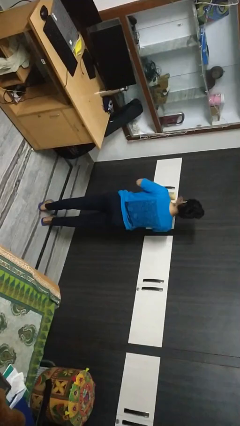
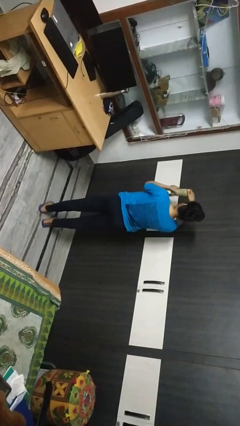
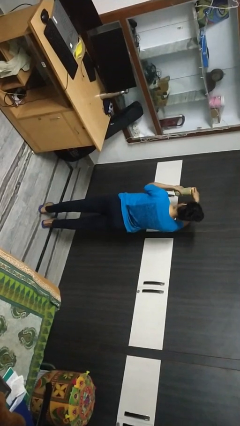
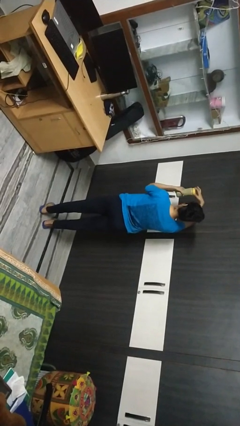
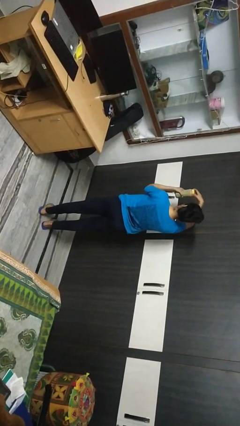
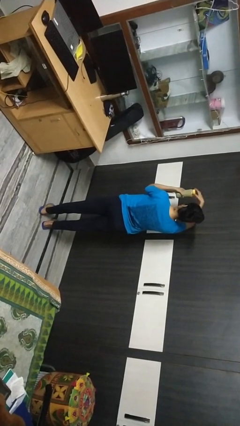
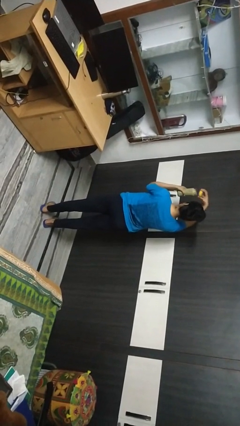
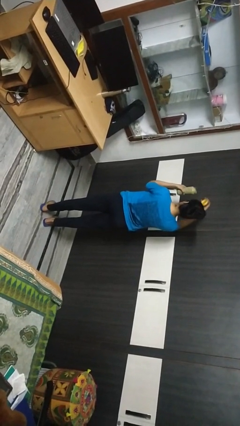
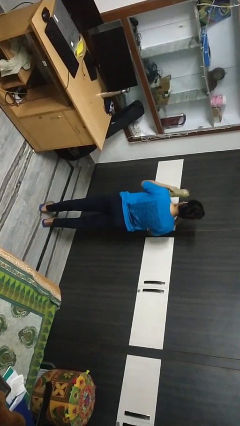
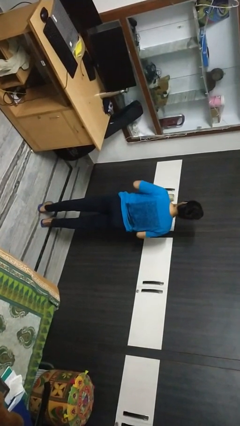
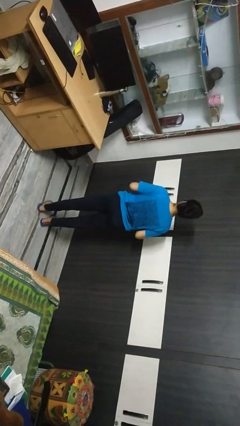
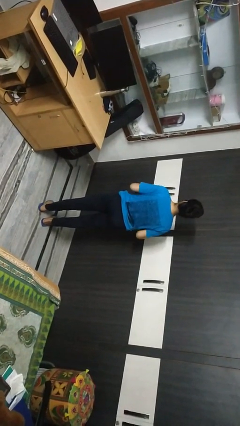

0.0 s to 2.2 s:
person opens jar

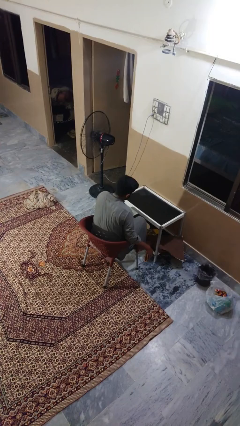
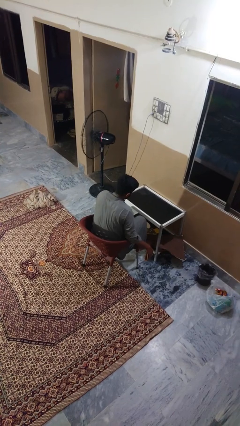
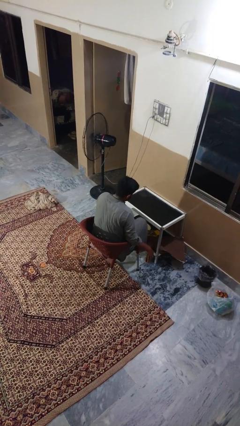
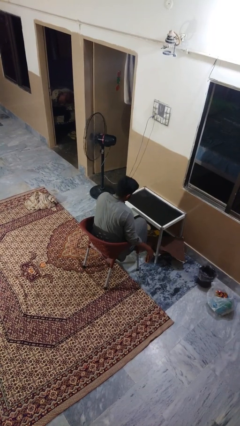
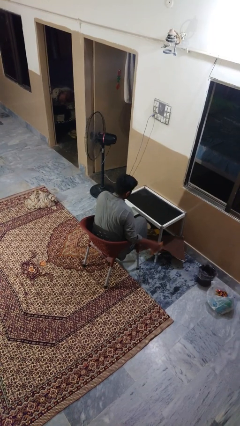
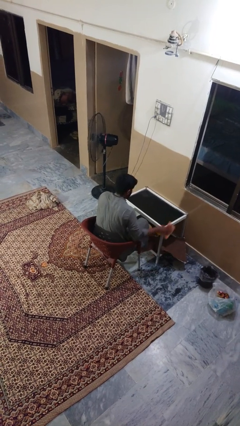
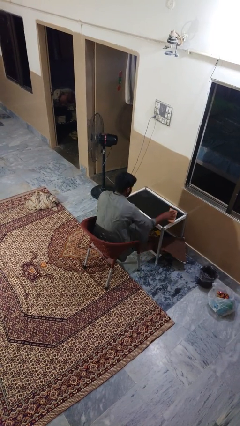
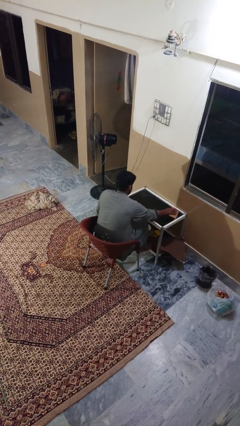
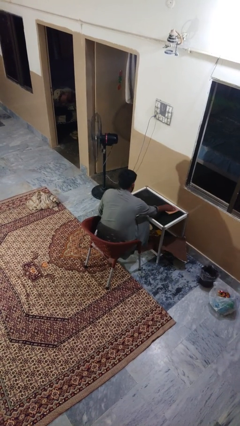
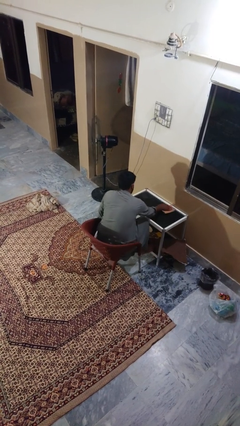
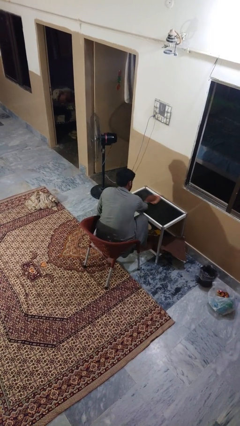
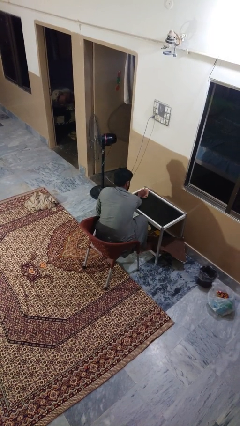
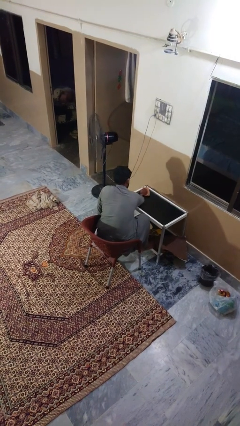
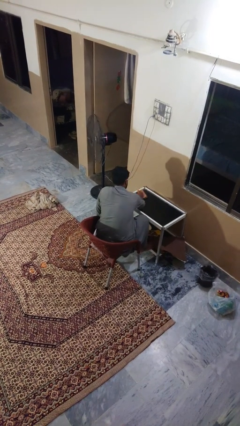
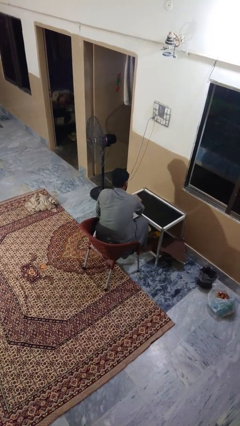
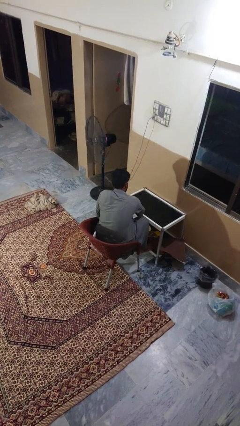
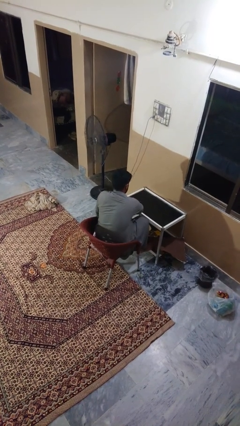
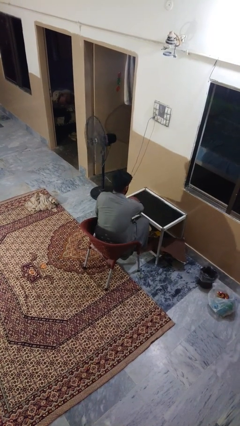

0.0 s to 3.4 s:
person cleans table with rag

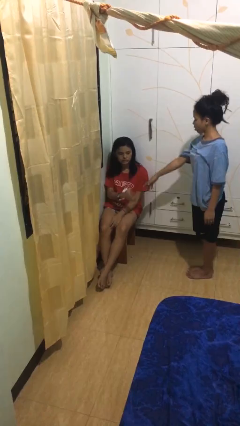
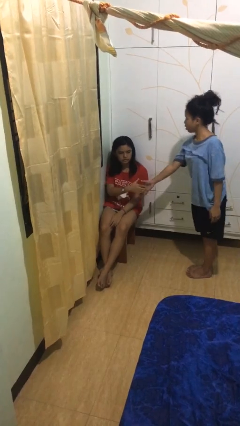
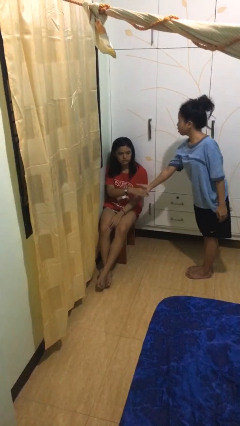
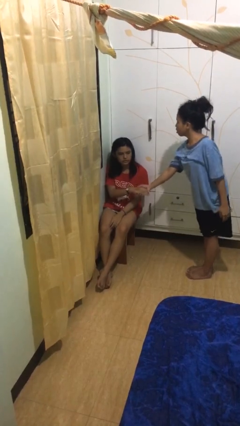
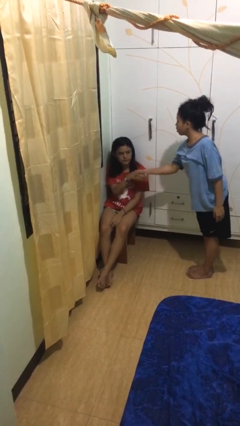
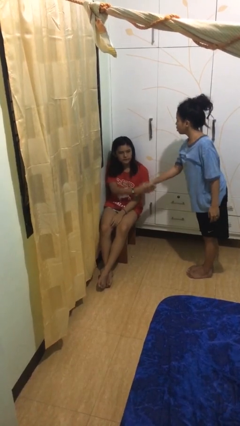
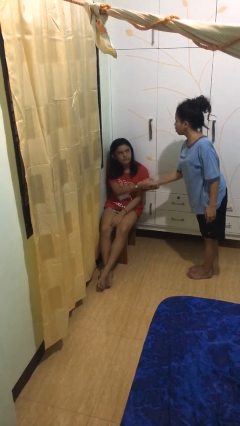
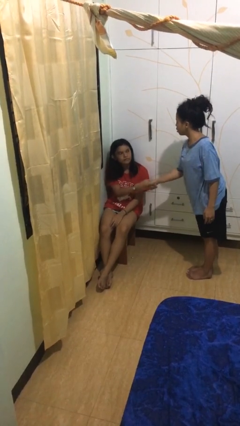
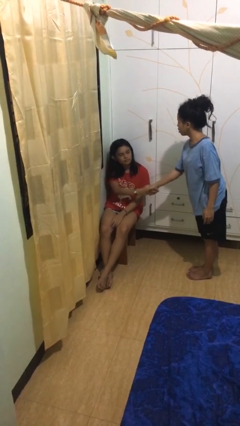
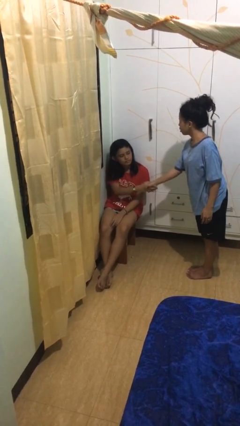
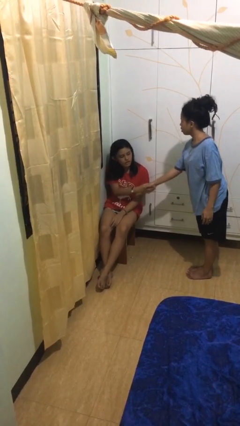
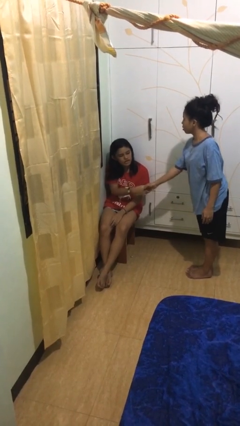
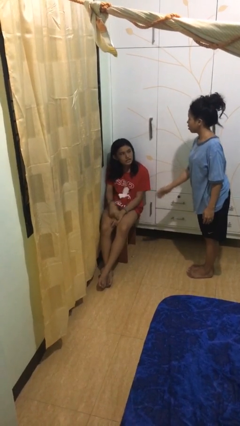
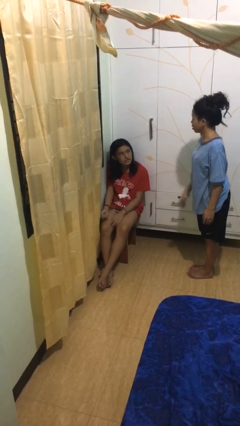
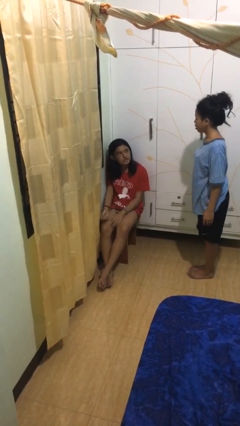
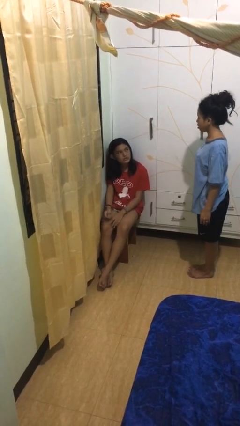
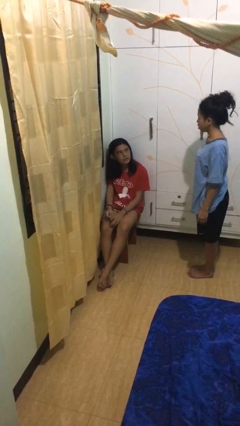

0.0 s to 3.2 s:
person shakes hand

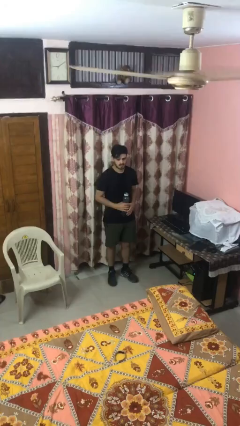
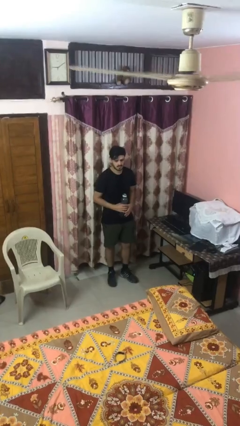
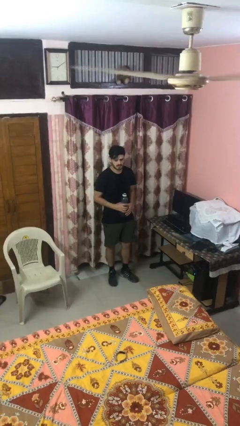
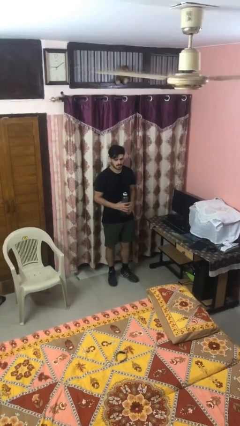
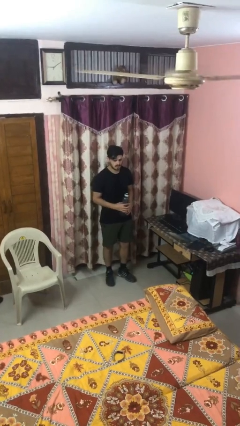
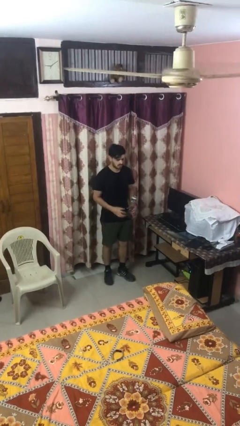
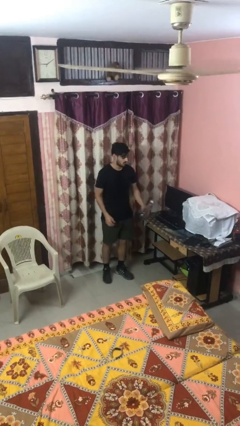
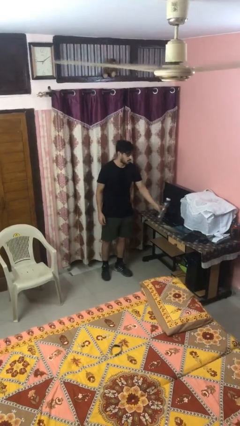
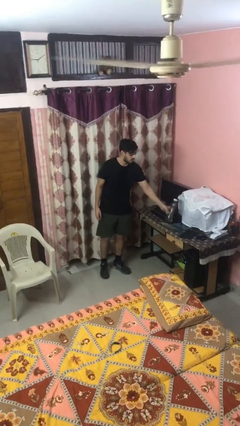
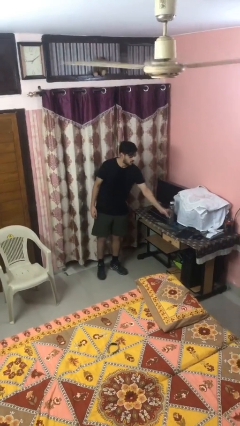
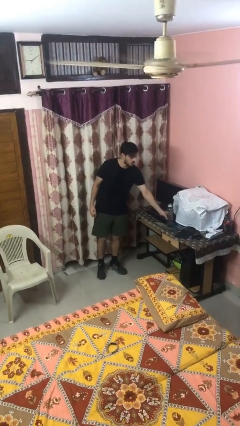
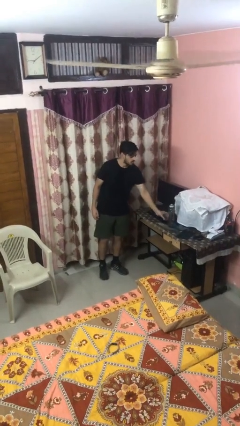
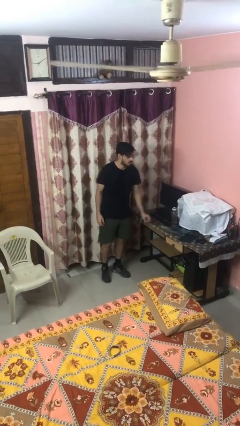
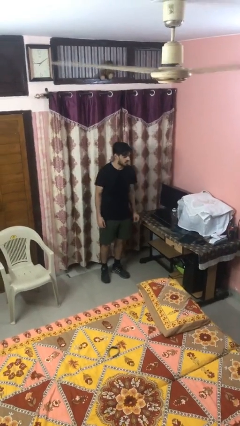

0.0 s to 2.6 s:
person puts down object on countertop

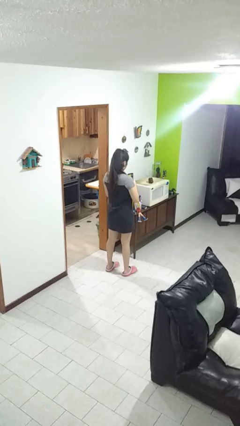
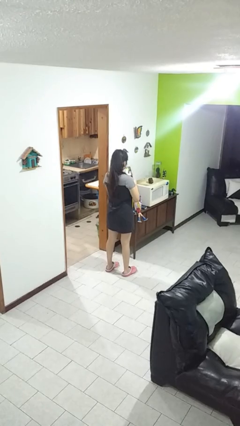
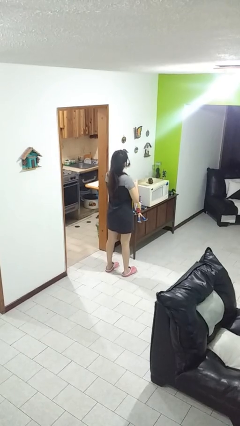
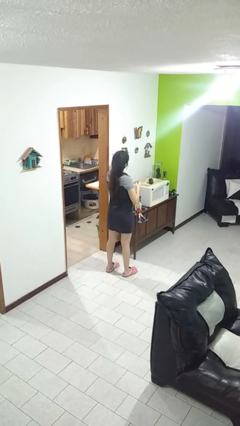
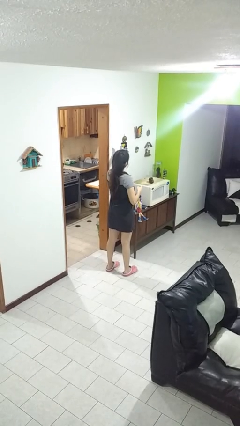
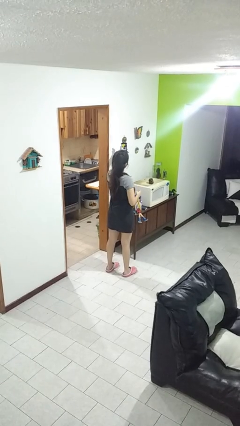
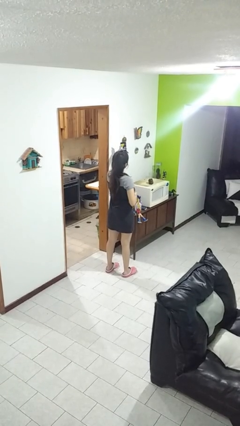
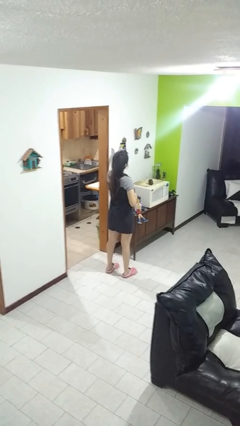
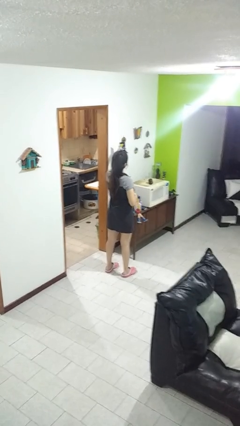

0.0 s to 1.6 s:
person takes selfie

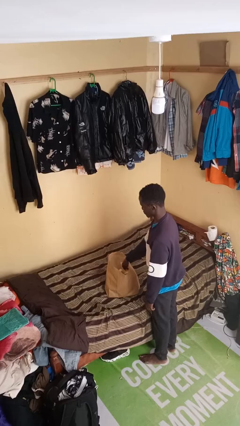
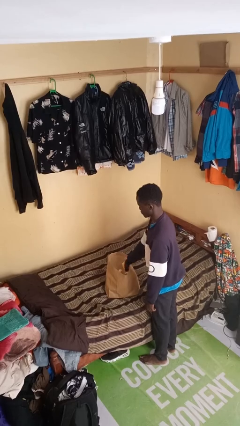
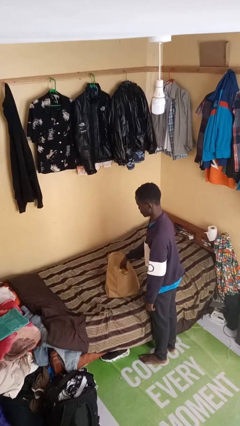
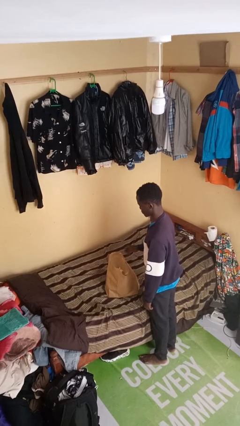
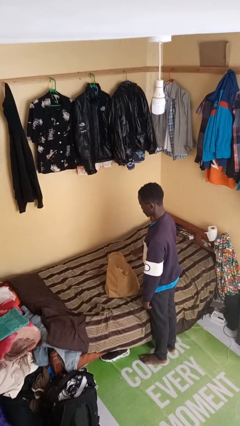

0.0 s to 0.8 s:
person puts object into bag

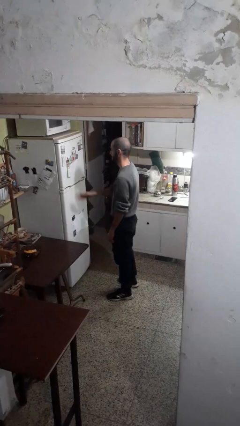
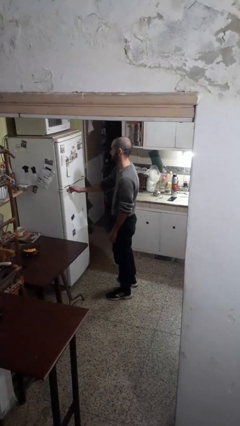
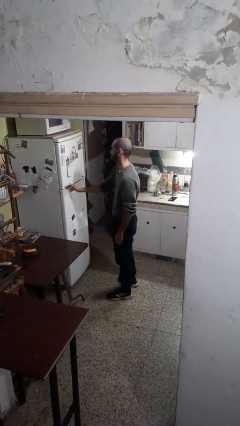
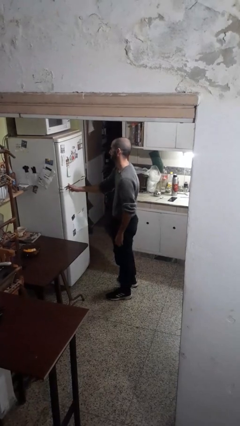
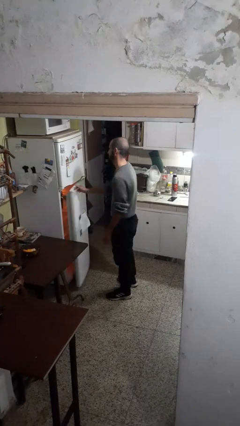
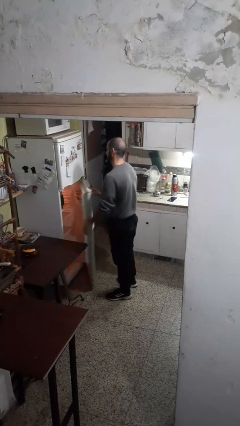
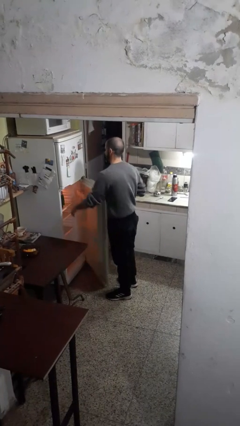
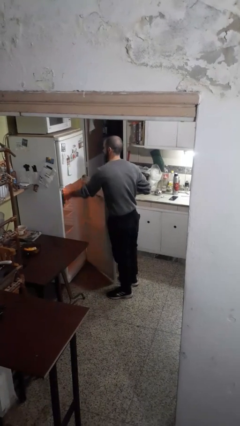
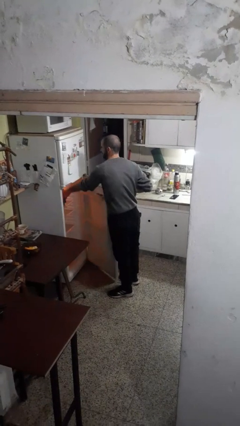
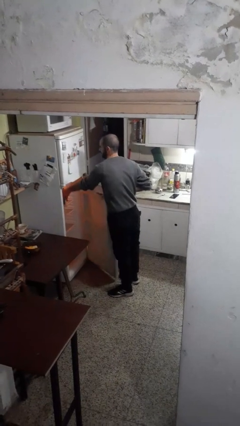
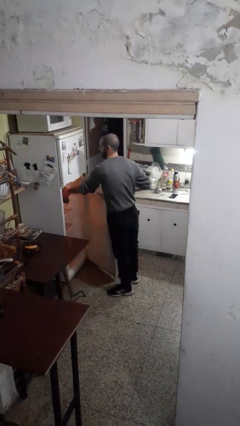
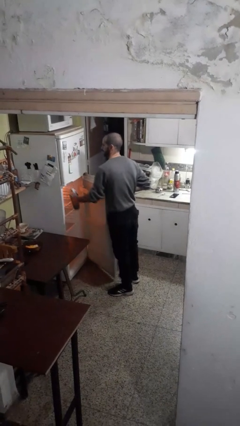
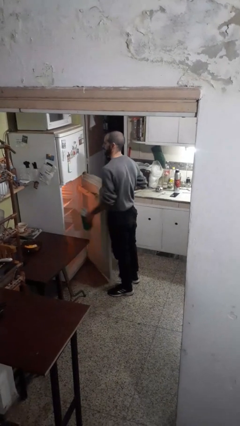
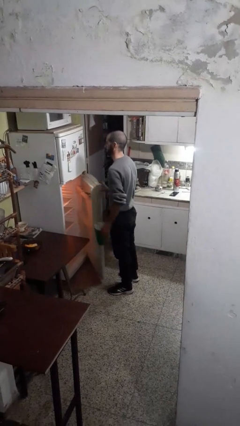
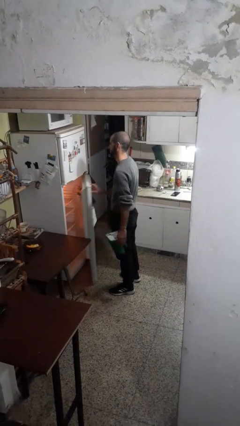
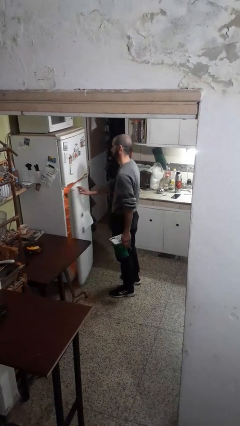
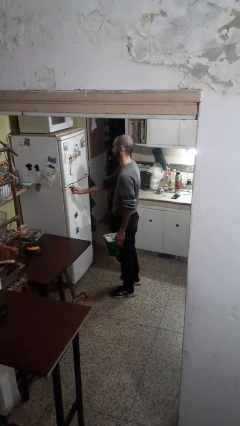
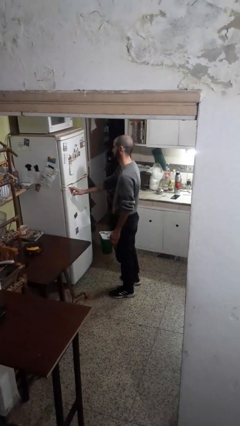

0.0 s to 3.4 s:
person takes object from refrigerator
